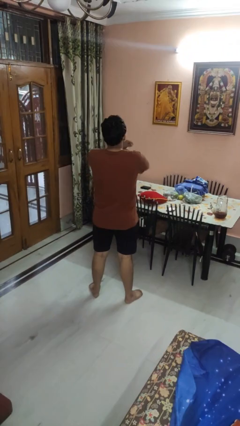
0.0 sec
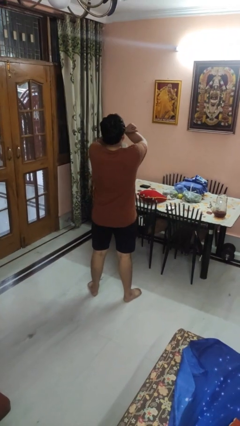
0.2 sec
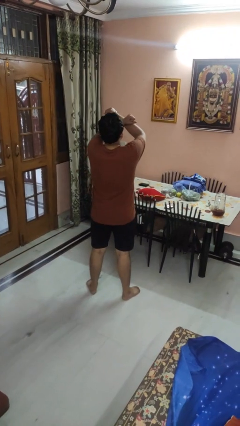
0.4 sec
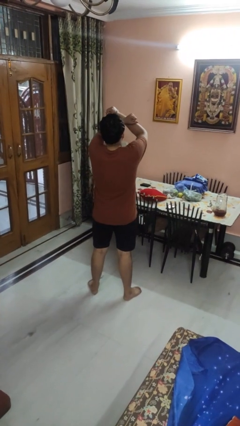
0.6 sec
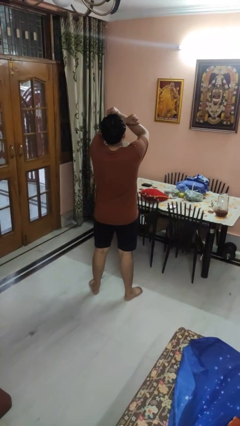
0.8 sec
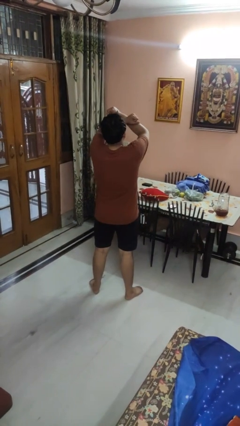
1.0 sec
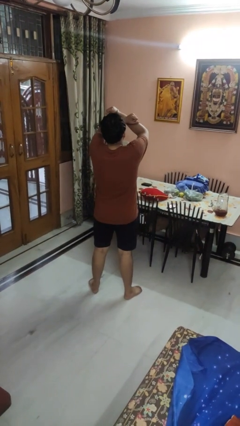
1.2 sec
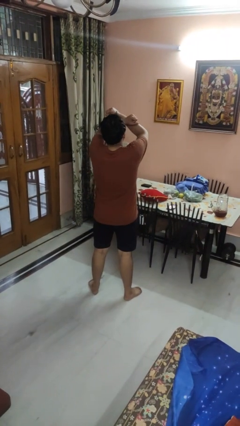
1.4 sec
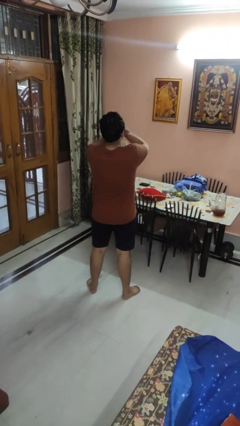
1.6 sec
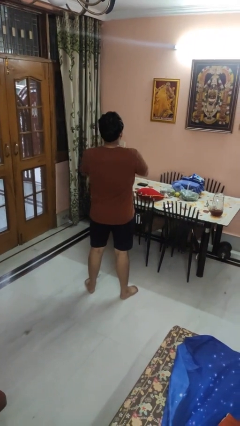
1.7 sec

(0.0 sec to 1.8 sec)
person gestures arms x

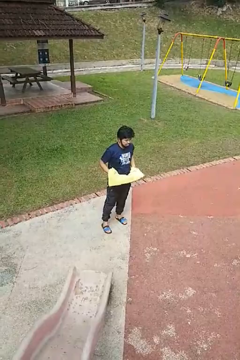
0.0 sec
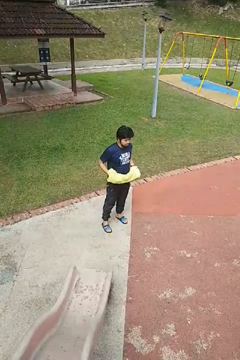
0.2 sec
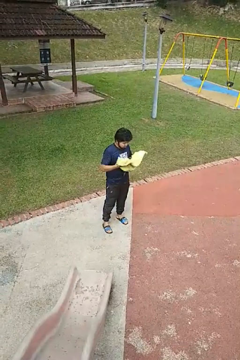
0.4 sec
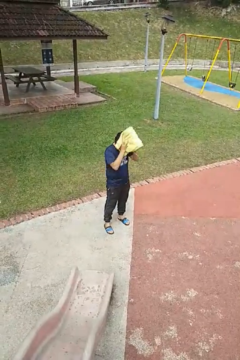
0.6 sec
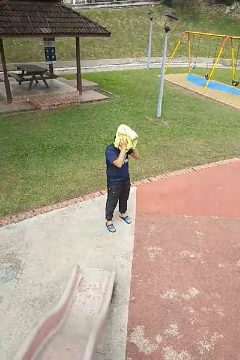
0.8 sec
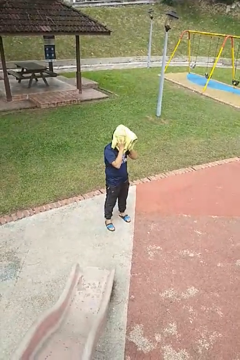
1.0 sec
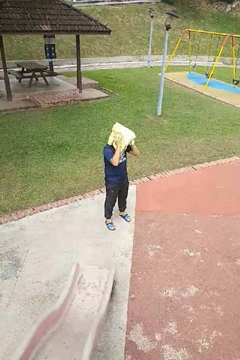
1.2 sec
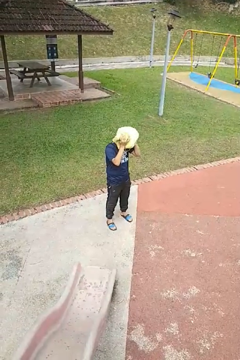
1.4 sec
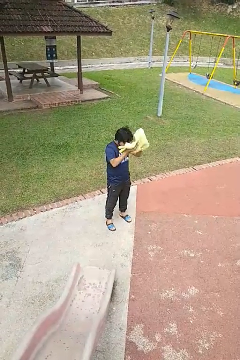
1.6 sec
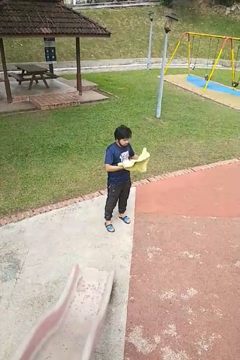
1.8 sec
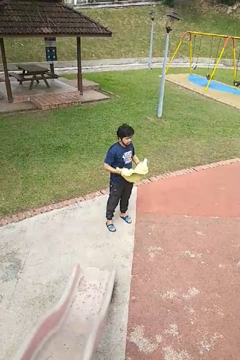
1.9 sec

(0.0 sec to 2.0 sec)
person dries hair with towel

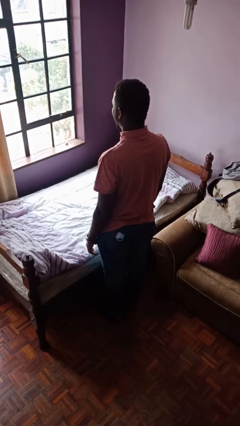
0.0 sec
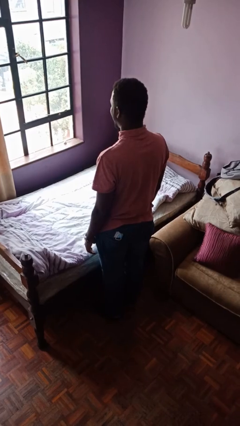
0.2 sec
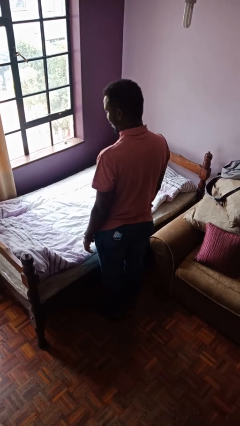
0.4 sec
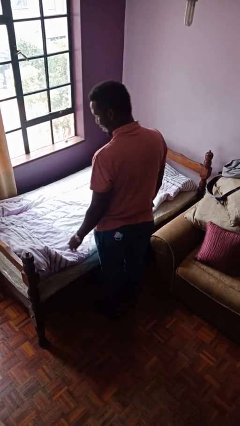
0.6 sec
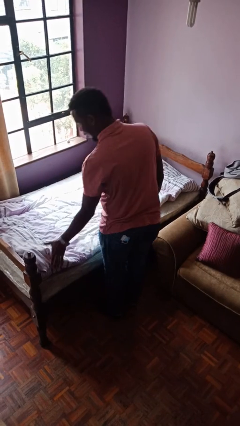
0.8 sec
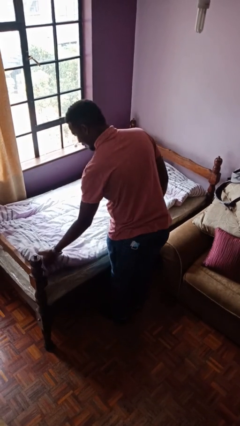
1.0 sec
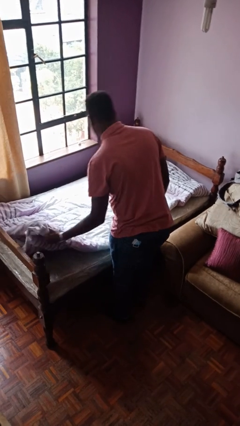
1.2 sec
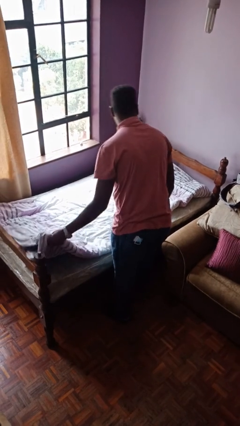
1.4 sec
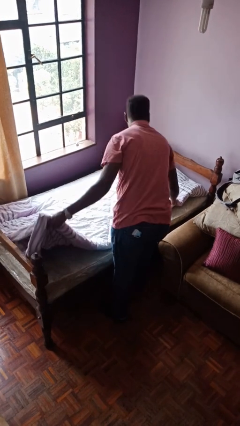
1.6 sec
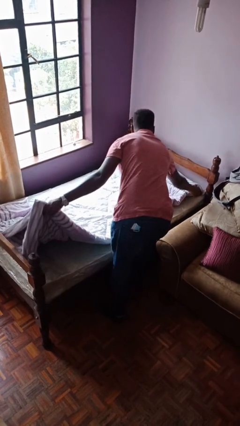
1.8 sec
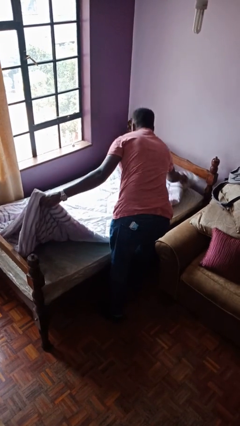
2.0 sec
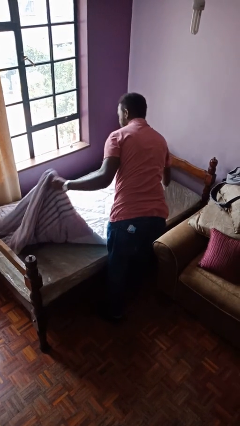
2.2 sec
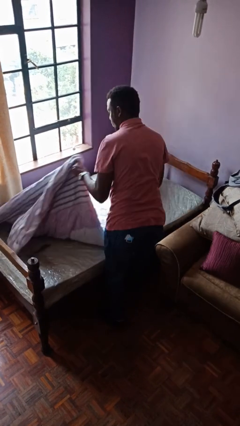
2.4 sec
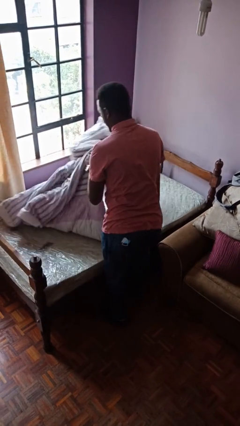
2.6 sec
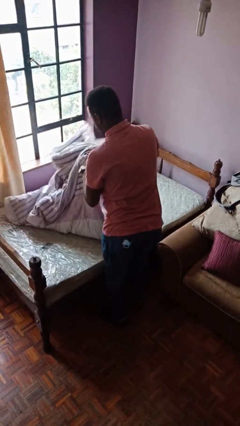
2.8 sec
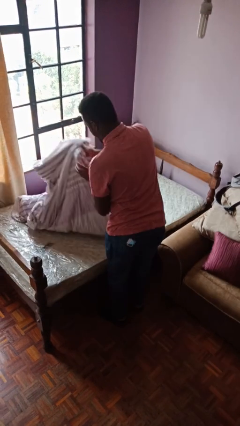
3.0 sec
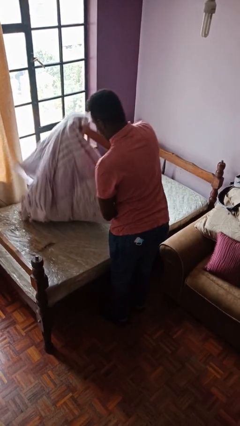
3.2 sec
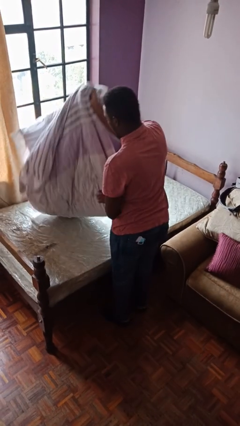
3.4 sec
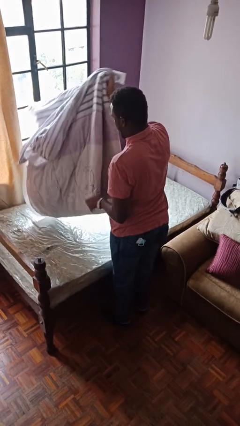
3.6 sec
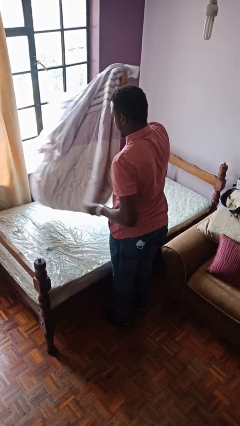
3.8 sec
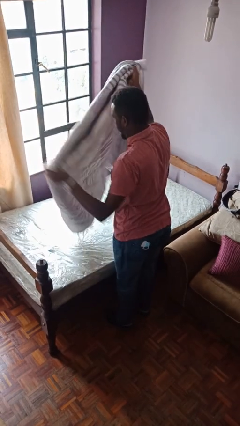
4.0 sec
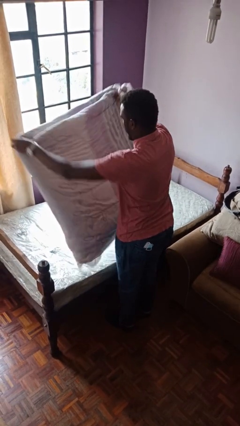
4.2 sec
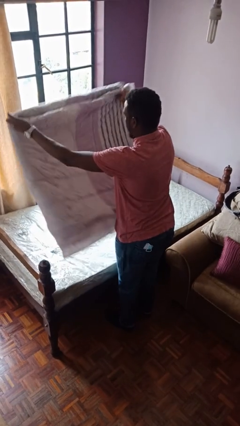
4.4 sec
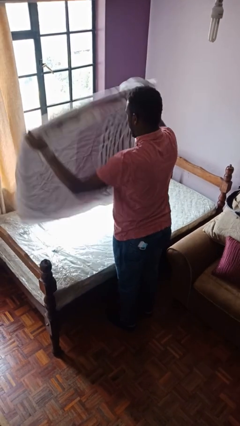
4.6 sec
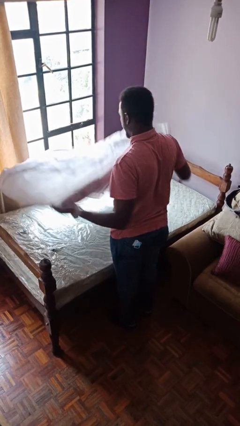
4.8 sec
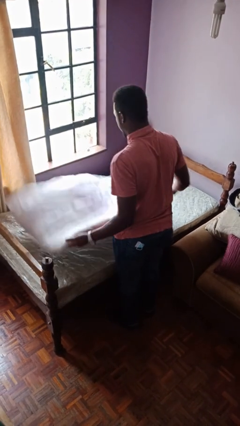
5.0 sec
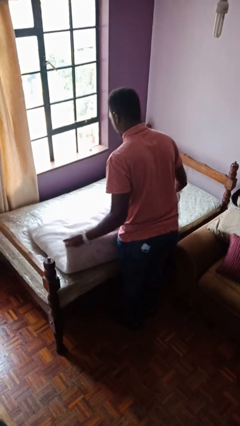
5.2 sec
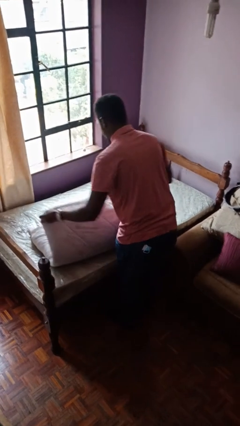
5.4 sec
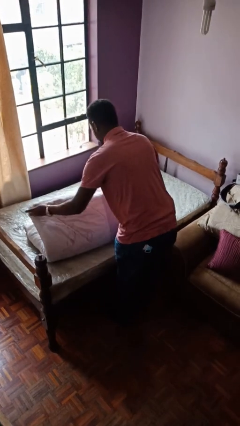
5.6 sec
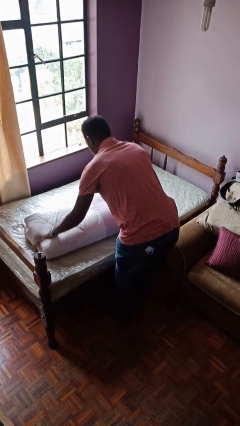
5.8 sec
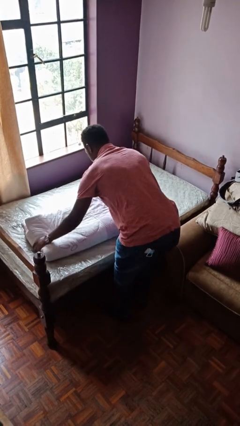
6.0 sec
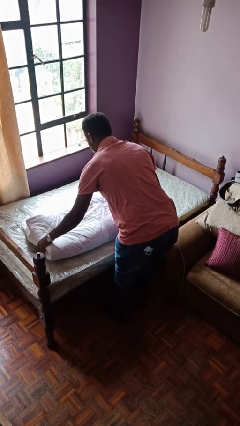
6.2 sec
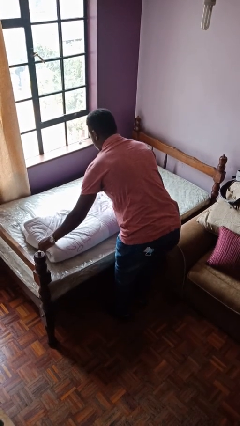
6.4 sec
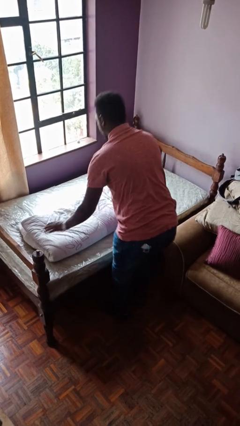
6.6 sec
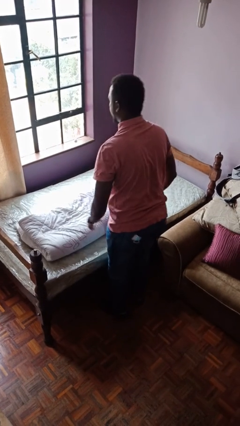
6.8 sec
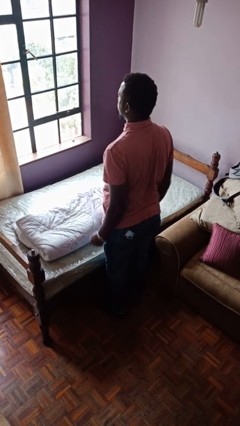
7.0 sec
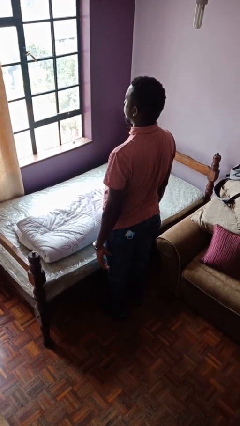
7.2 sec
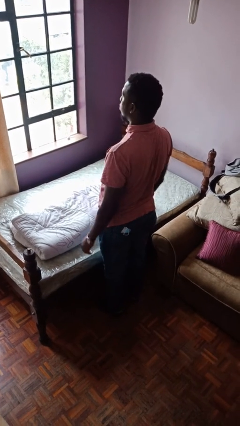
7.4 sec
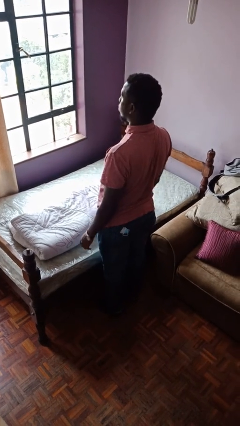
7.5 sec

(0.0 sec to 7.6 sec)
person folds blanket

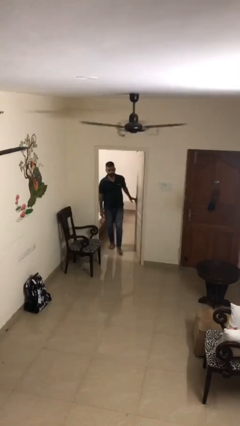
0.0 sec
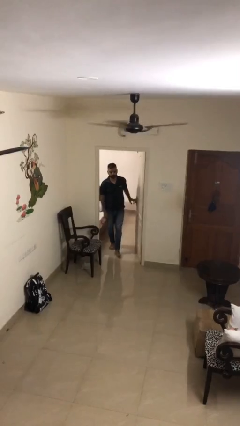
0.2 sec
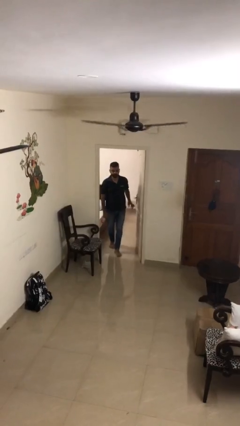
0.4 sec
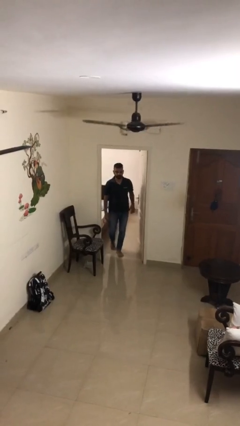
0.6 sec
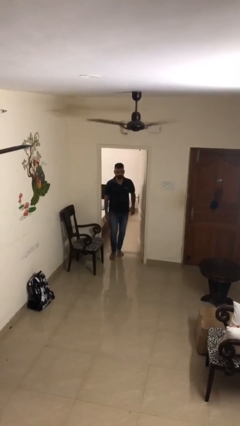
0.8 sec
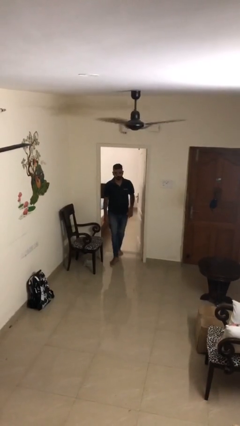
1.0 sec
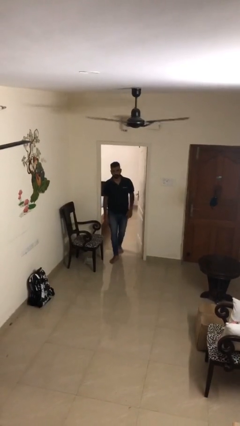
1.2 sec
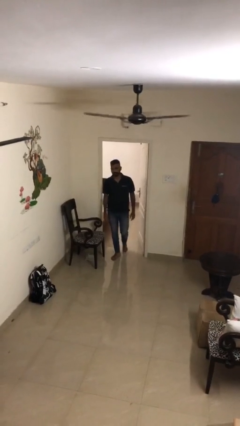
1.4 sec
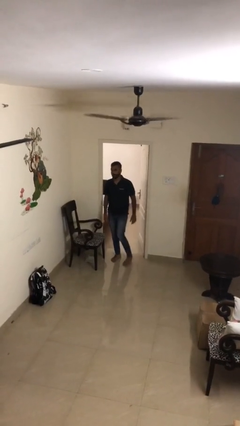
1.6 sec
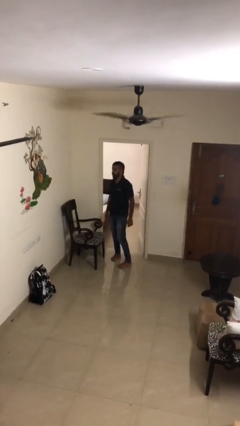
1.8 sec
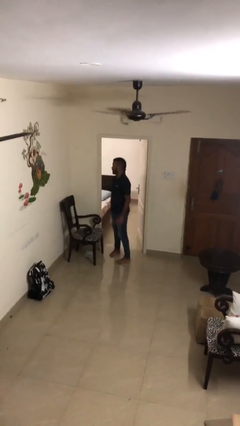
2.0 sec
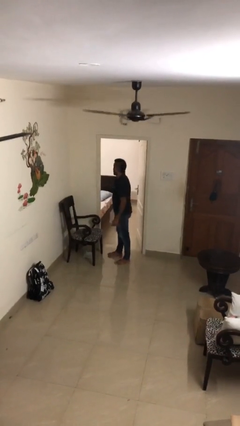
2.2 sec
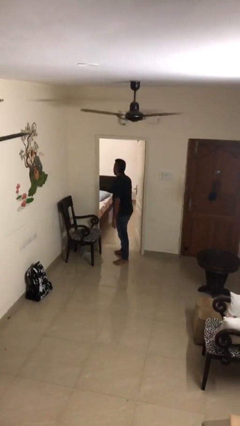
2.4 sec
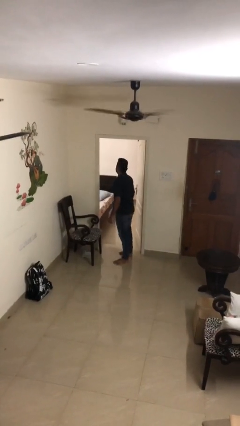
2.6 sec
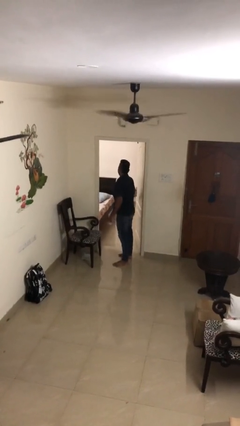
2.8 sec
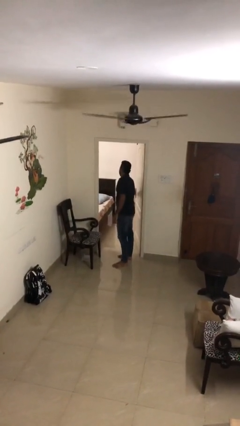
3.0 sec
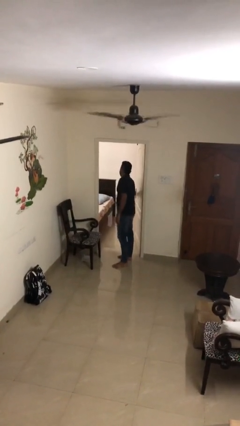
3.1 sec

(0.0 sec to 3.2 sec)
person enters scene through structure

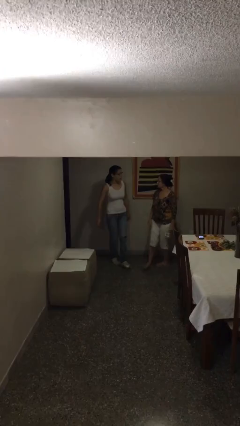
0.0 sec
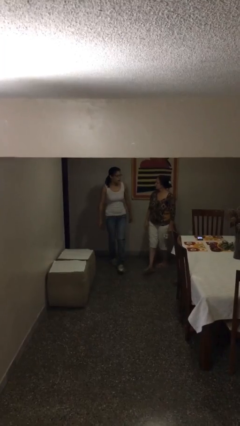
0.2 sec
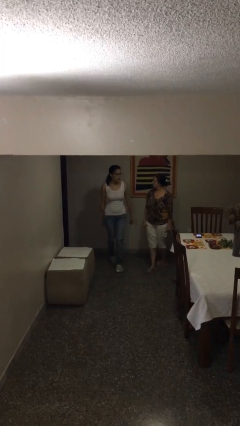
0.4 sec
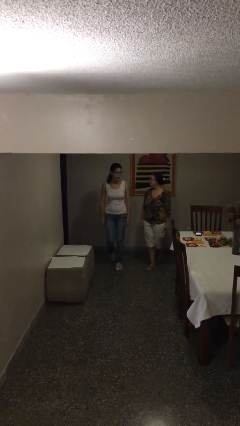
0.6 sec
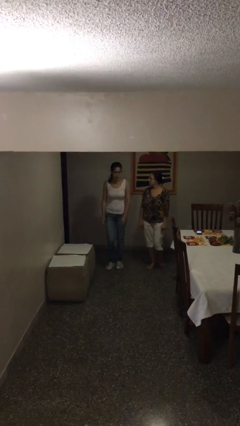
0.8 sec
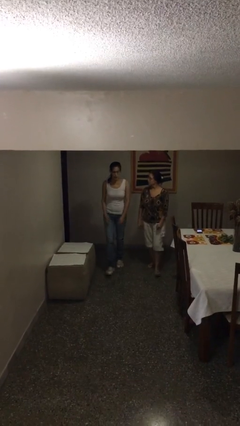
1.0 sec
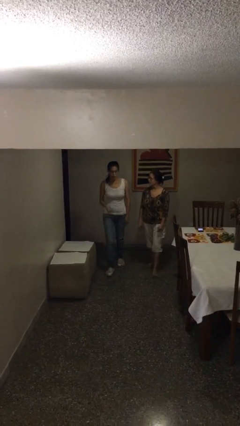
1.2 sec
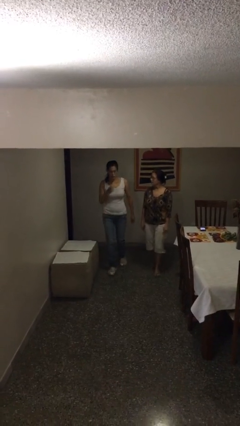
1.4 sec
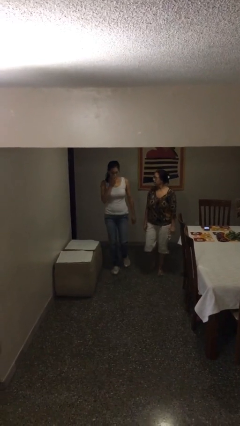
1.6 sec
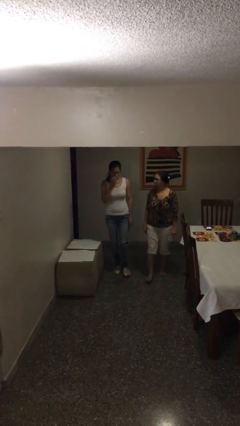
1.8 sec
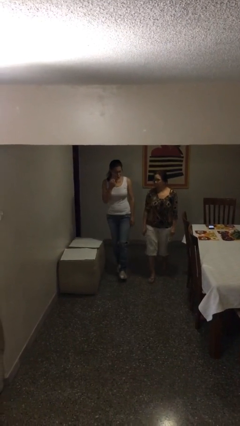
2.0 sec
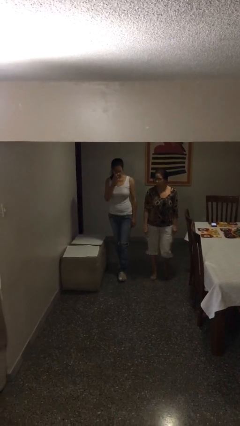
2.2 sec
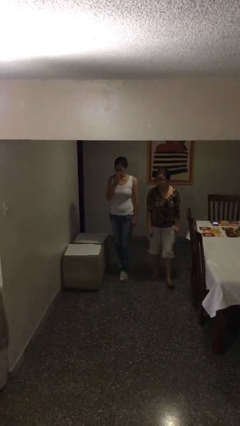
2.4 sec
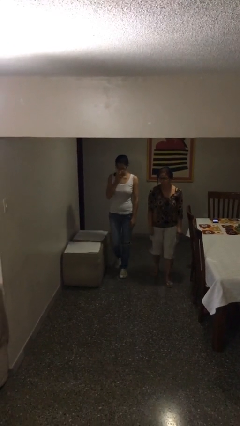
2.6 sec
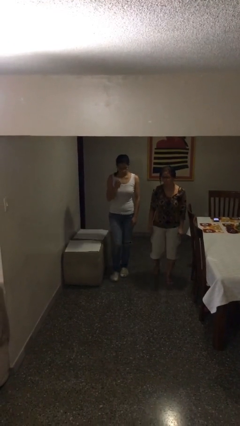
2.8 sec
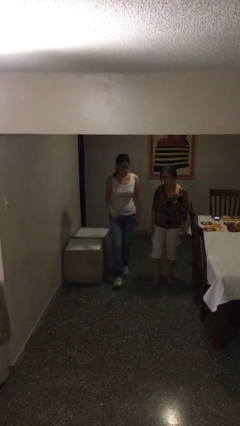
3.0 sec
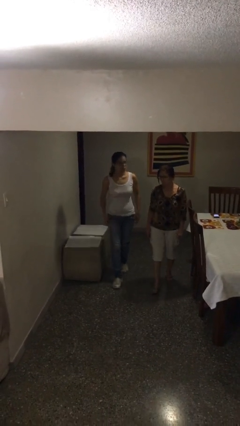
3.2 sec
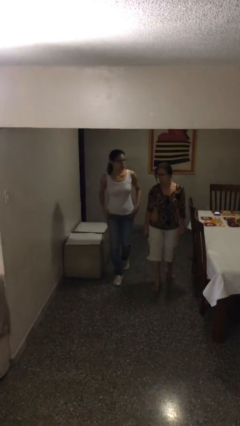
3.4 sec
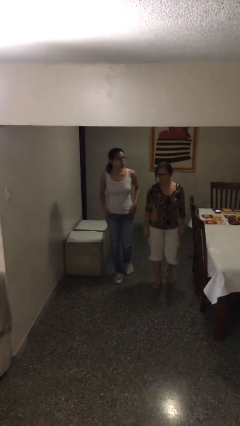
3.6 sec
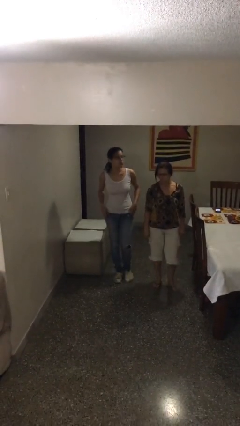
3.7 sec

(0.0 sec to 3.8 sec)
person talks to person
